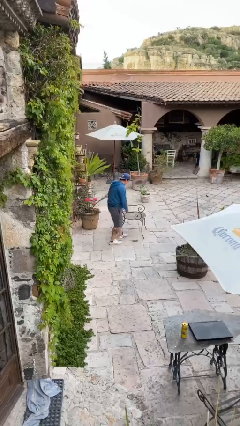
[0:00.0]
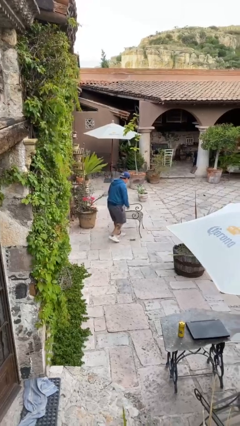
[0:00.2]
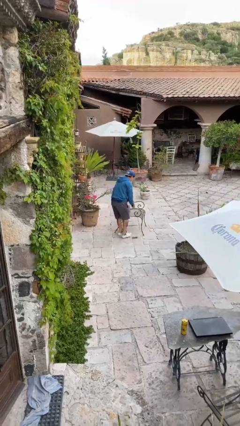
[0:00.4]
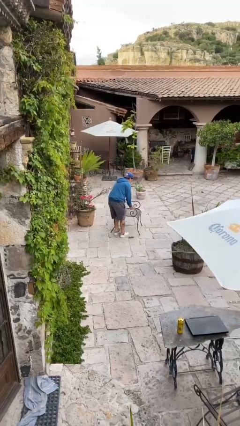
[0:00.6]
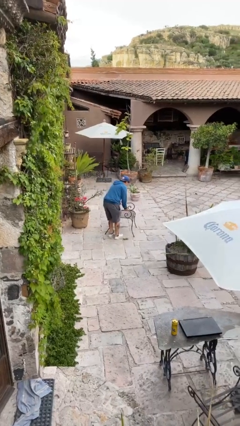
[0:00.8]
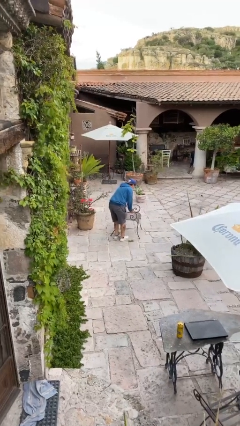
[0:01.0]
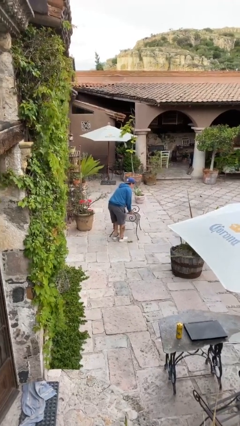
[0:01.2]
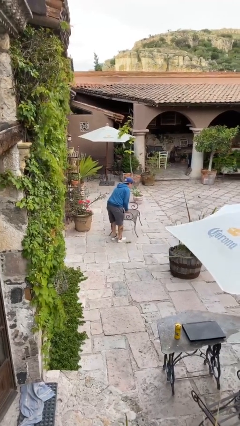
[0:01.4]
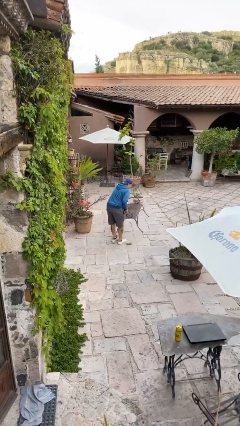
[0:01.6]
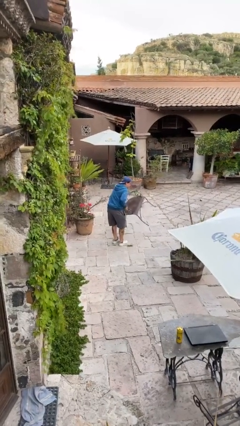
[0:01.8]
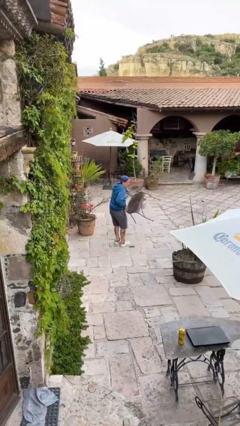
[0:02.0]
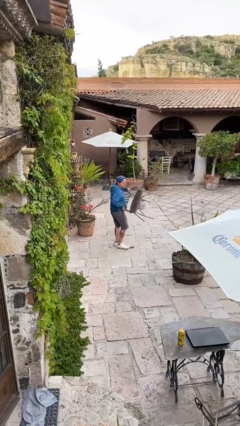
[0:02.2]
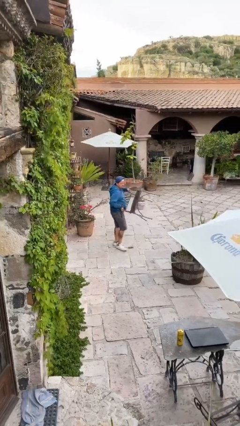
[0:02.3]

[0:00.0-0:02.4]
person picks up object from floor

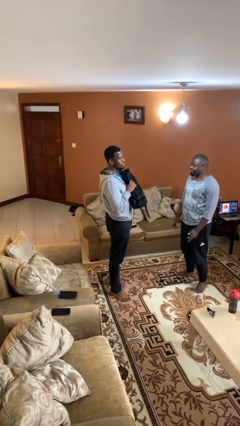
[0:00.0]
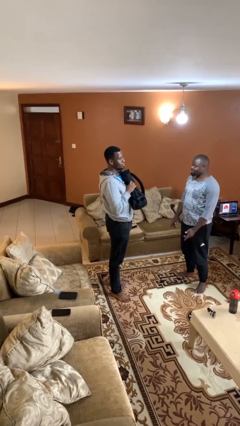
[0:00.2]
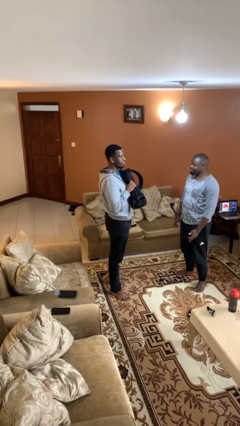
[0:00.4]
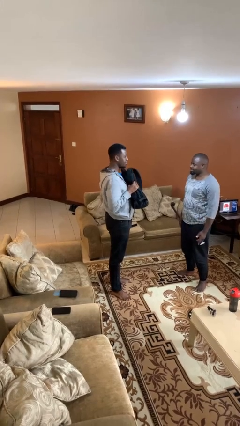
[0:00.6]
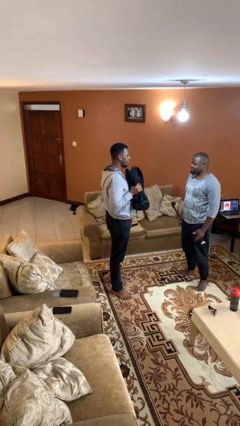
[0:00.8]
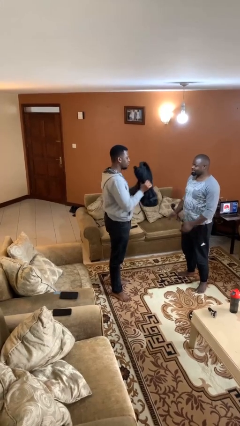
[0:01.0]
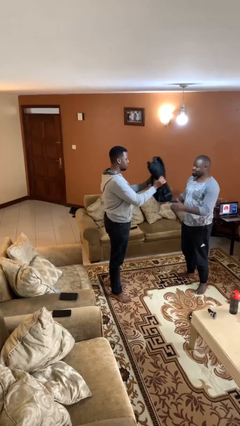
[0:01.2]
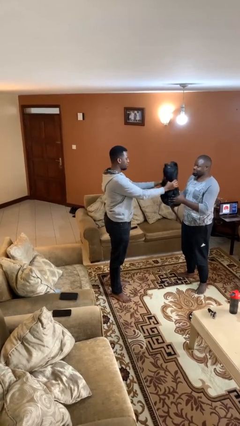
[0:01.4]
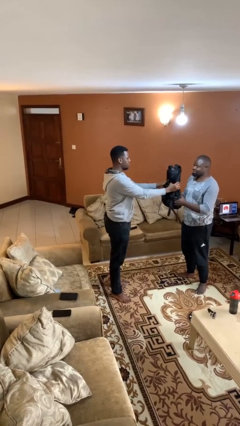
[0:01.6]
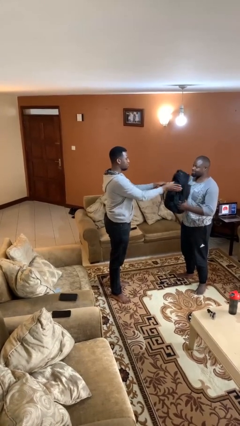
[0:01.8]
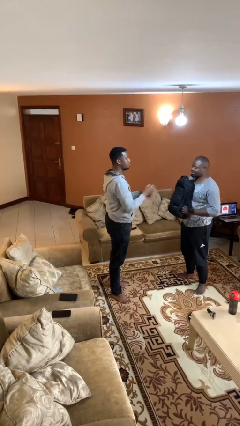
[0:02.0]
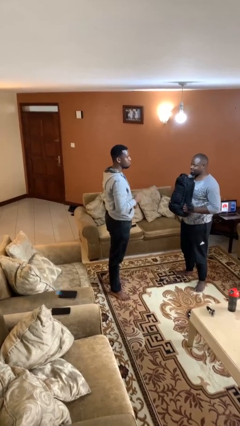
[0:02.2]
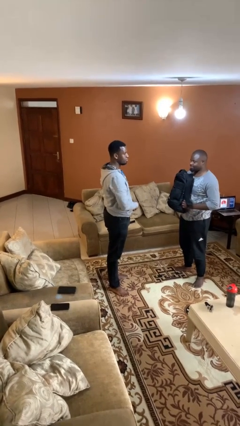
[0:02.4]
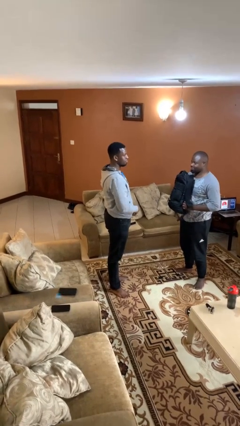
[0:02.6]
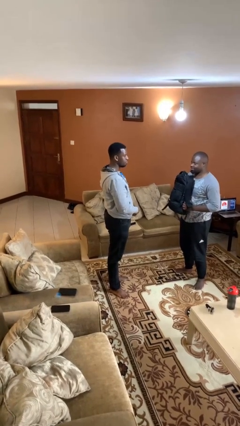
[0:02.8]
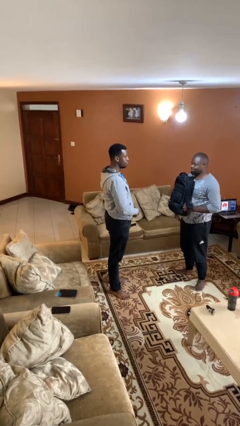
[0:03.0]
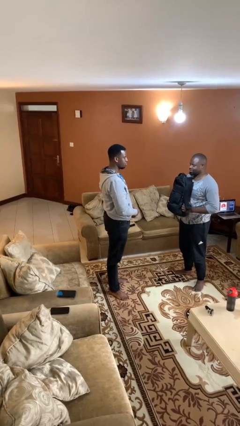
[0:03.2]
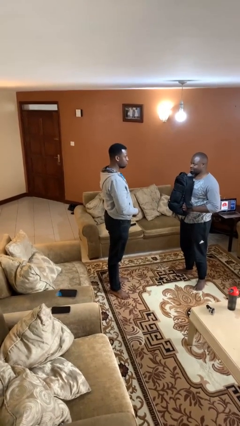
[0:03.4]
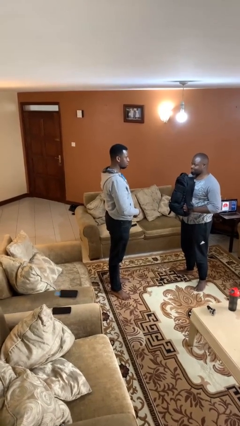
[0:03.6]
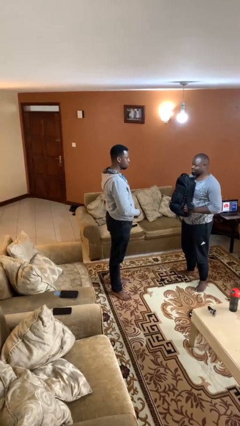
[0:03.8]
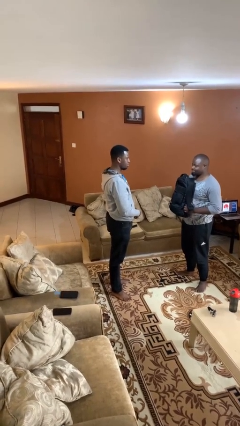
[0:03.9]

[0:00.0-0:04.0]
person transfers object to person

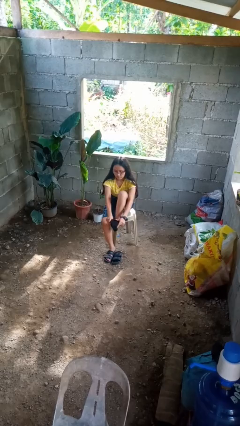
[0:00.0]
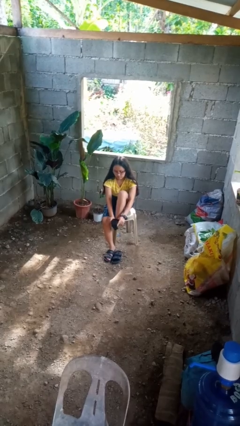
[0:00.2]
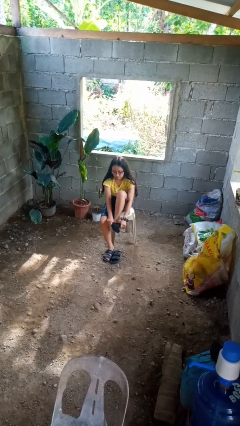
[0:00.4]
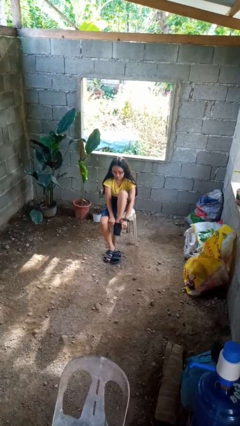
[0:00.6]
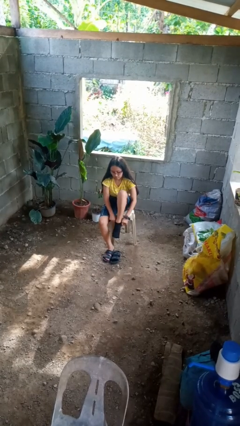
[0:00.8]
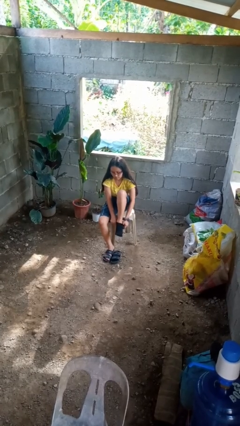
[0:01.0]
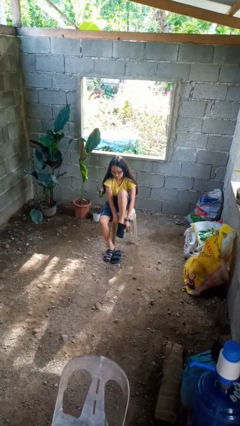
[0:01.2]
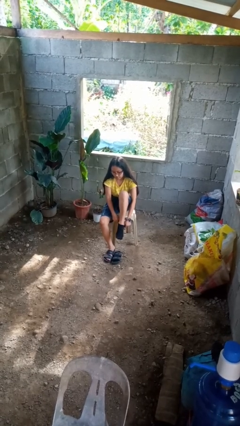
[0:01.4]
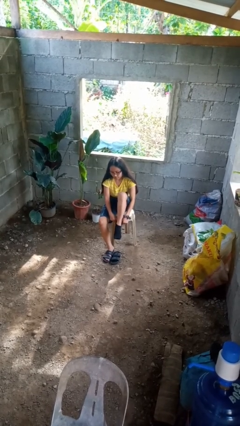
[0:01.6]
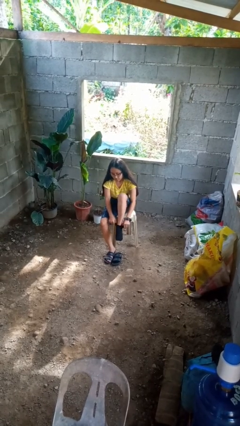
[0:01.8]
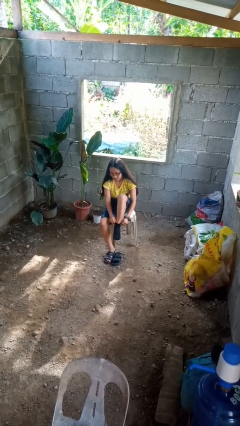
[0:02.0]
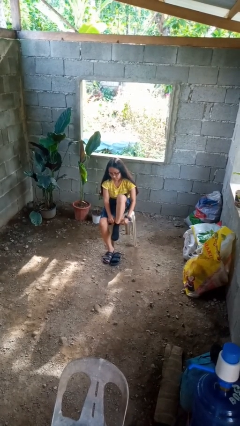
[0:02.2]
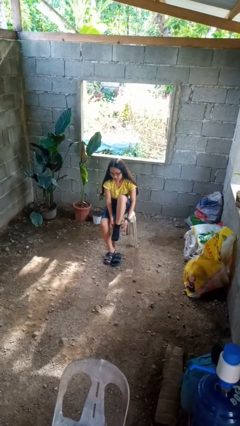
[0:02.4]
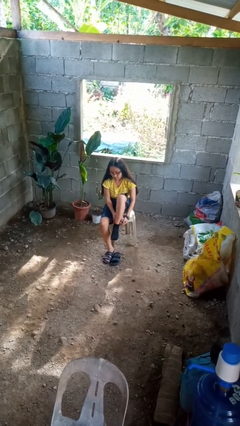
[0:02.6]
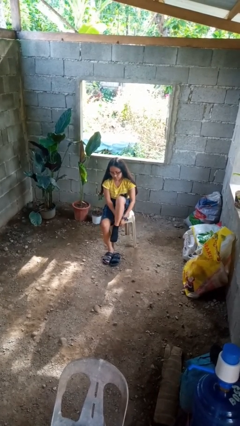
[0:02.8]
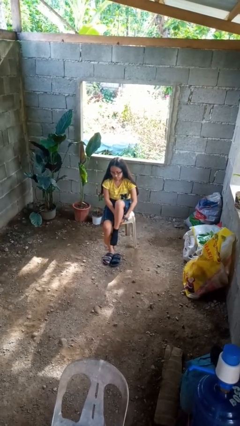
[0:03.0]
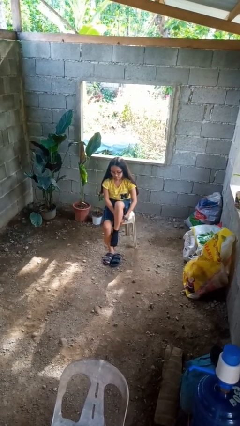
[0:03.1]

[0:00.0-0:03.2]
person puts on socks

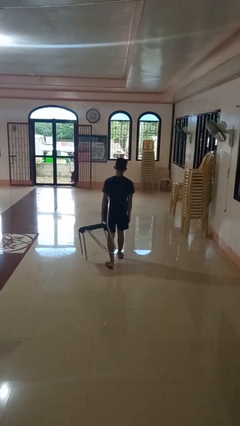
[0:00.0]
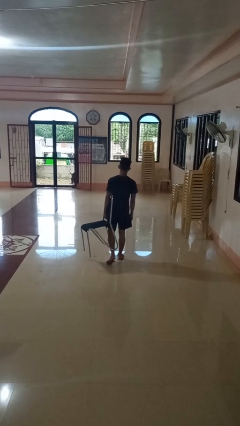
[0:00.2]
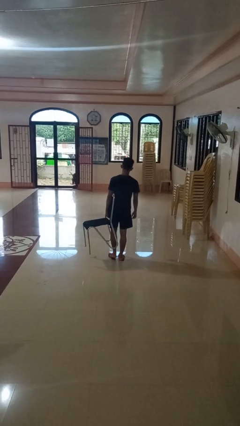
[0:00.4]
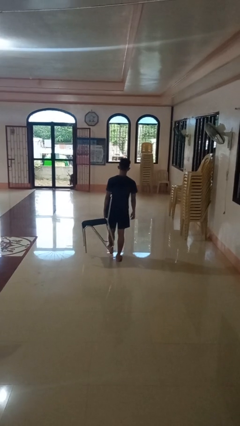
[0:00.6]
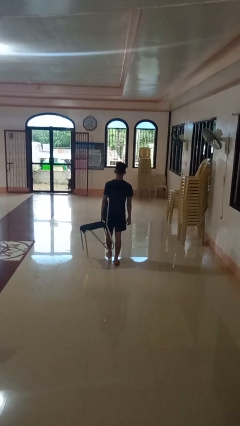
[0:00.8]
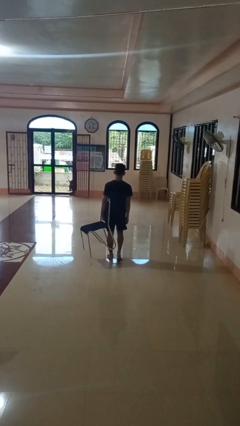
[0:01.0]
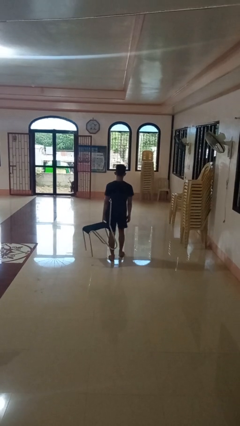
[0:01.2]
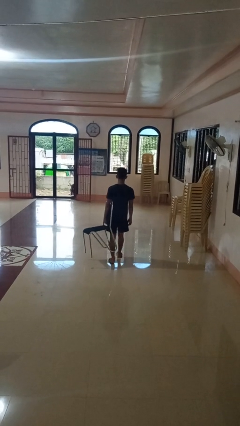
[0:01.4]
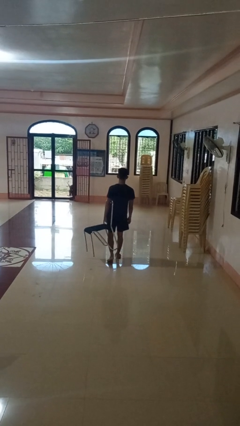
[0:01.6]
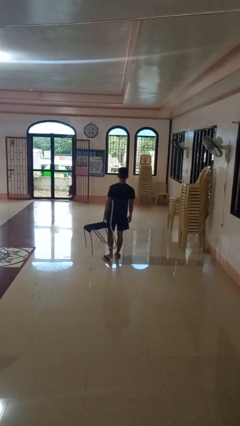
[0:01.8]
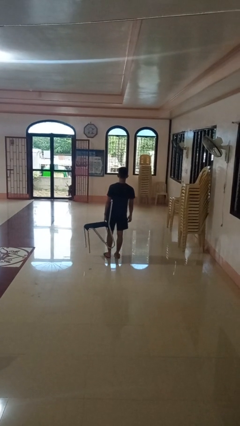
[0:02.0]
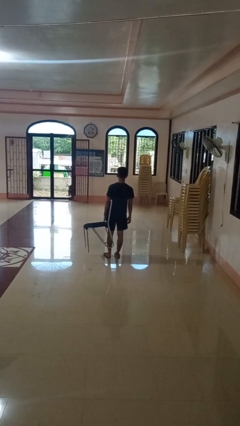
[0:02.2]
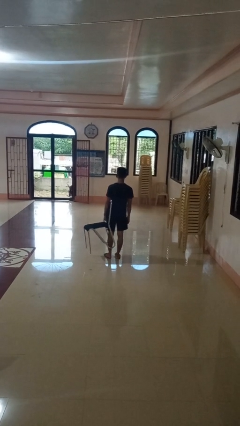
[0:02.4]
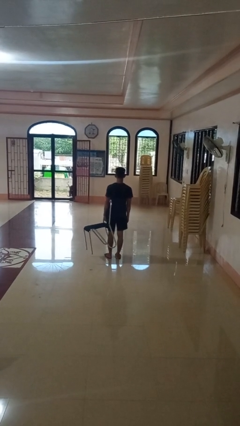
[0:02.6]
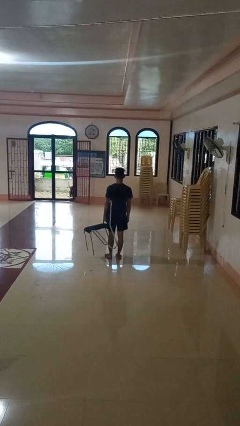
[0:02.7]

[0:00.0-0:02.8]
person carries furniture

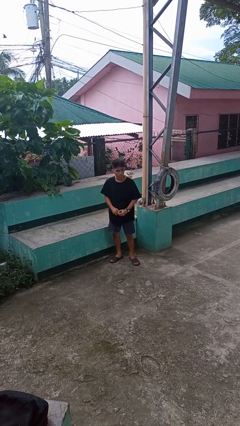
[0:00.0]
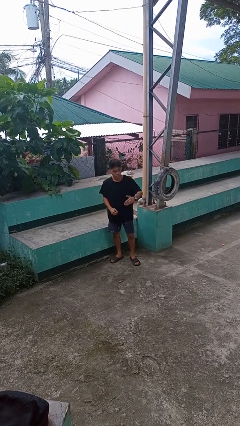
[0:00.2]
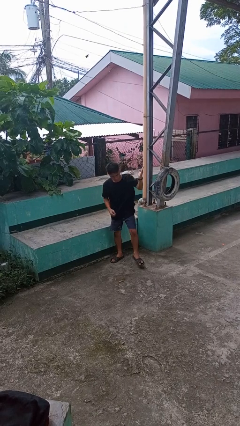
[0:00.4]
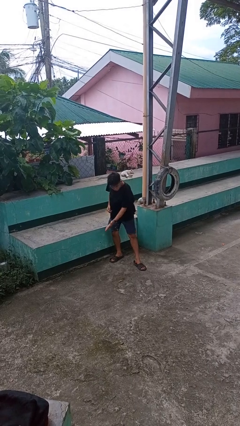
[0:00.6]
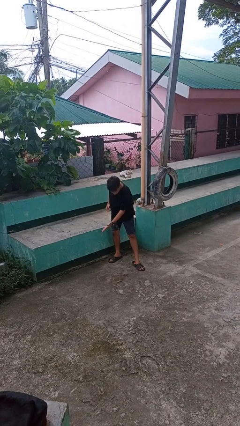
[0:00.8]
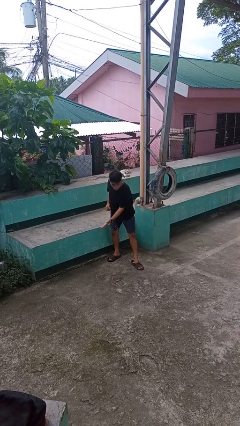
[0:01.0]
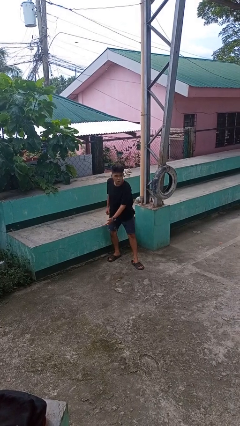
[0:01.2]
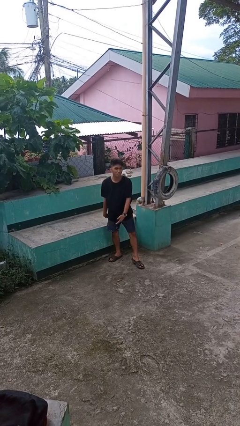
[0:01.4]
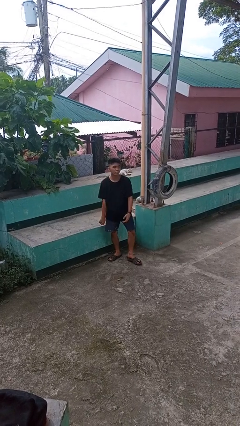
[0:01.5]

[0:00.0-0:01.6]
person karate chop

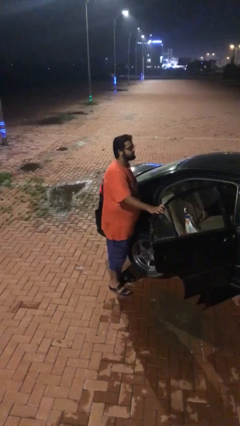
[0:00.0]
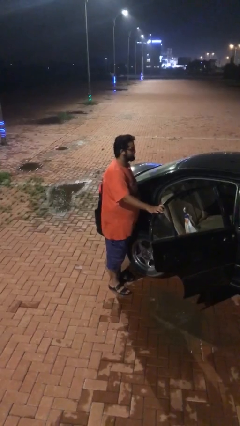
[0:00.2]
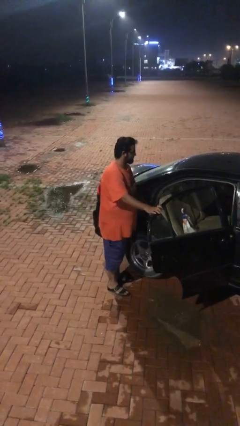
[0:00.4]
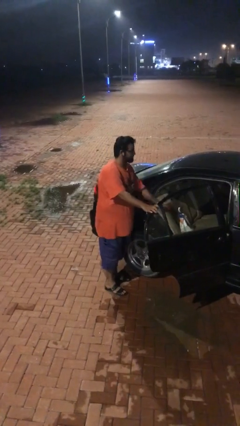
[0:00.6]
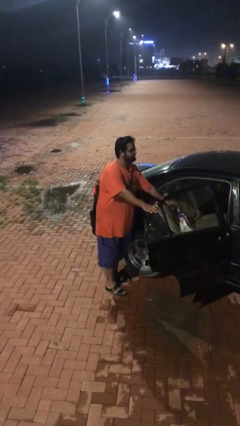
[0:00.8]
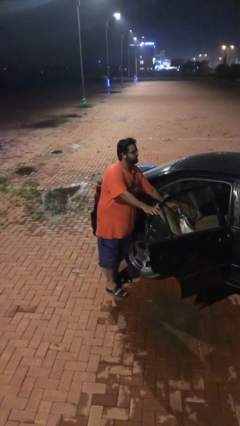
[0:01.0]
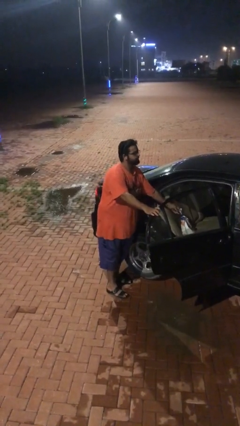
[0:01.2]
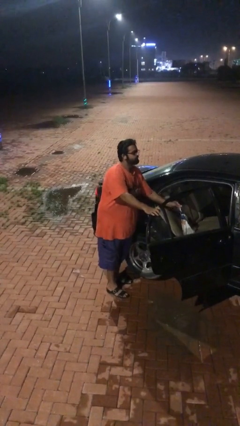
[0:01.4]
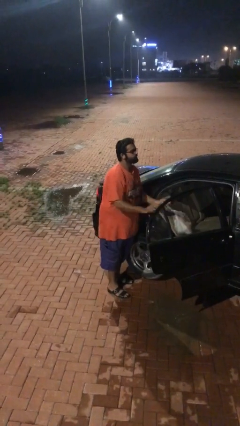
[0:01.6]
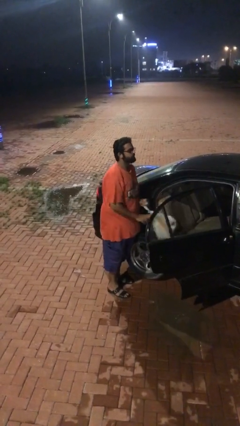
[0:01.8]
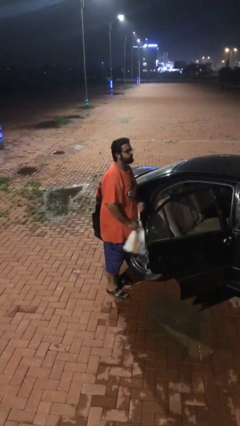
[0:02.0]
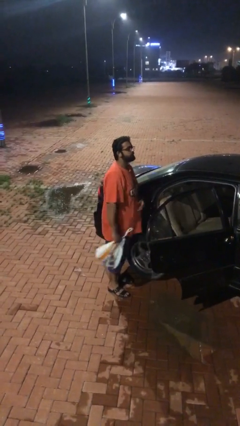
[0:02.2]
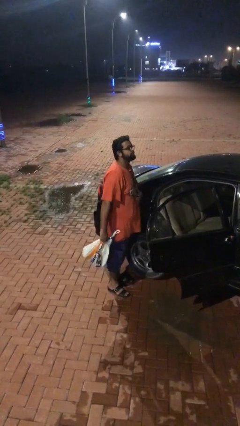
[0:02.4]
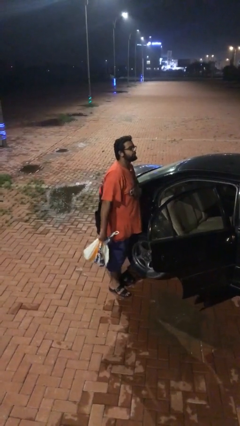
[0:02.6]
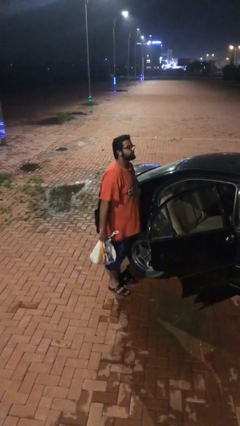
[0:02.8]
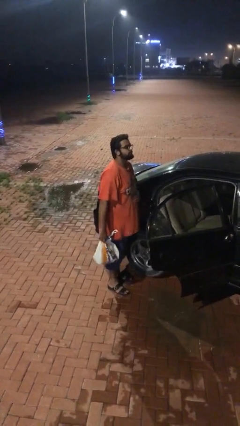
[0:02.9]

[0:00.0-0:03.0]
person unloads car

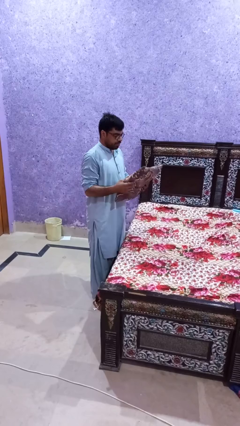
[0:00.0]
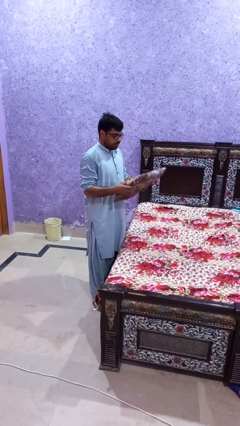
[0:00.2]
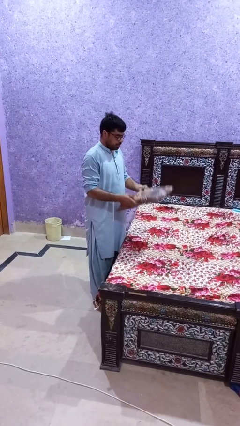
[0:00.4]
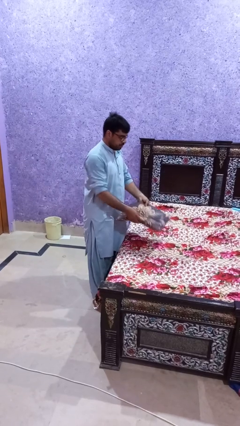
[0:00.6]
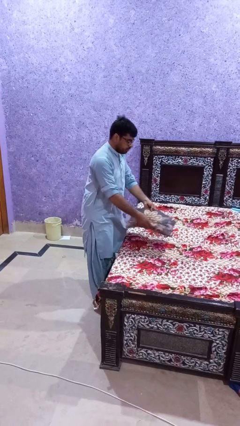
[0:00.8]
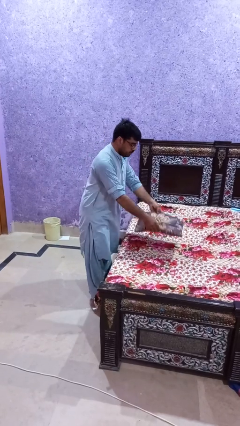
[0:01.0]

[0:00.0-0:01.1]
person puts down object on bed
